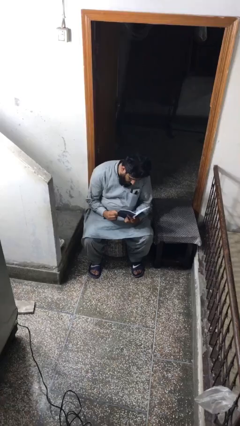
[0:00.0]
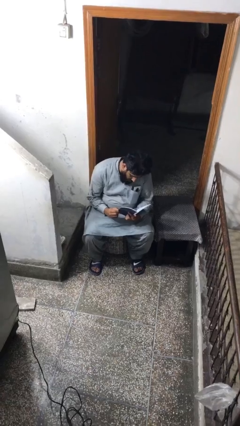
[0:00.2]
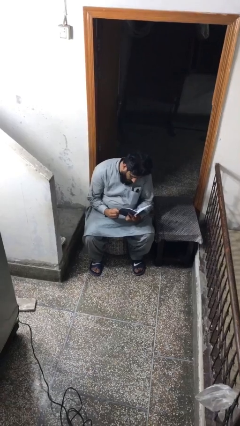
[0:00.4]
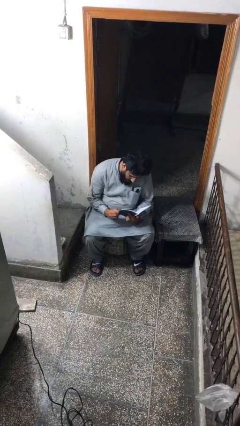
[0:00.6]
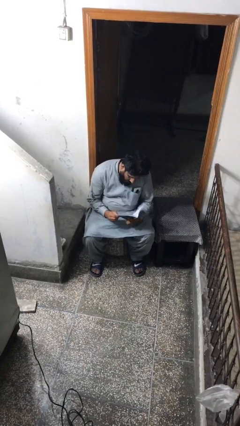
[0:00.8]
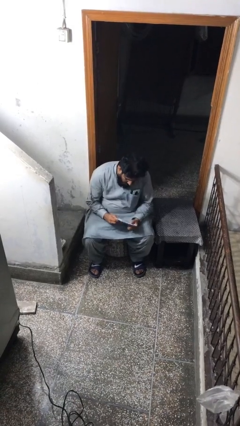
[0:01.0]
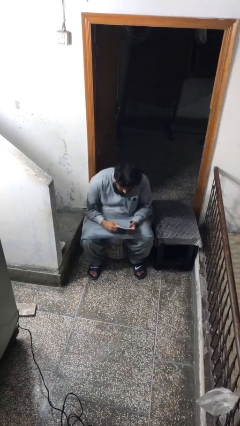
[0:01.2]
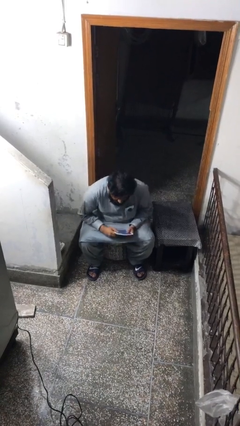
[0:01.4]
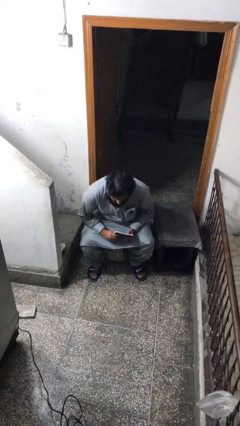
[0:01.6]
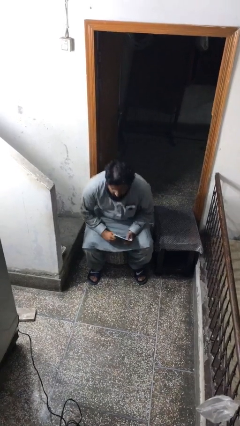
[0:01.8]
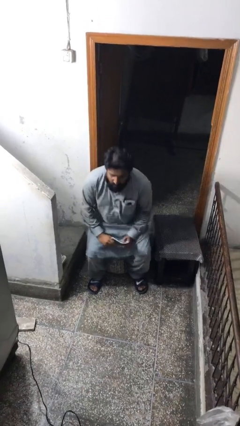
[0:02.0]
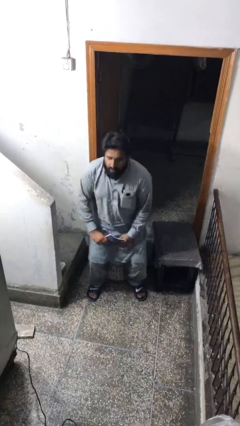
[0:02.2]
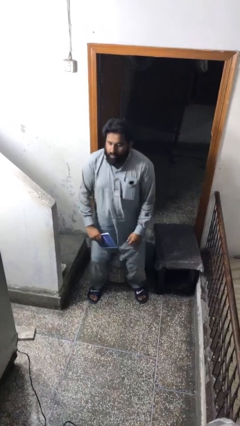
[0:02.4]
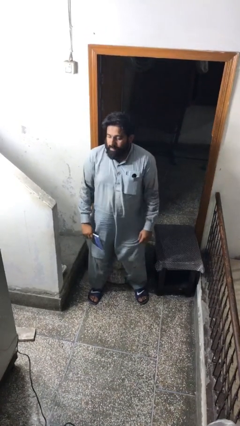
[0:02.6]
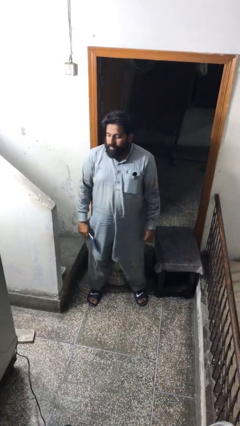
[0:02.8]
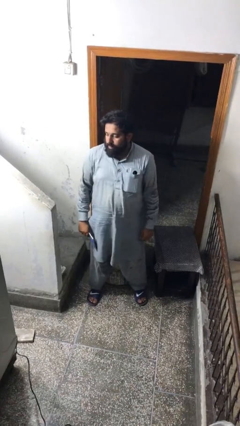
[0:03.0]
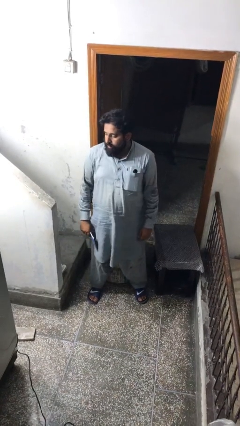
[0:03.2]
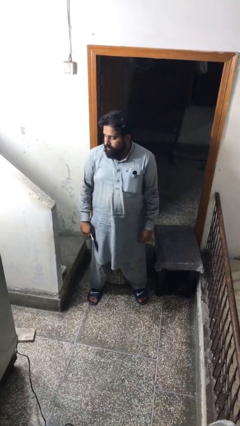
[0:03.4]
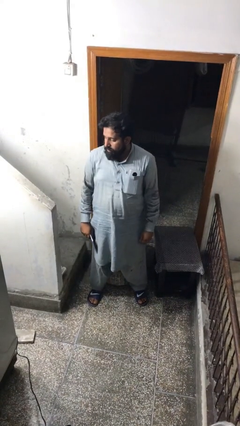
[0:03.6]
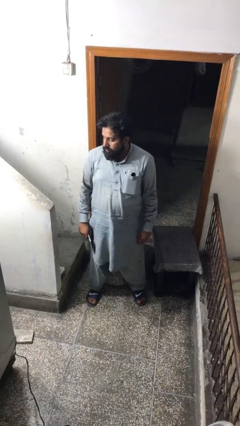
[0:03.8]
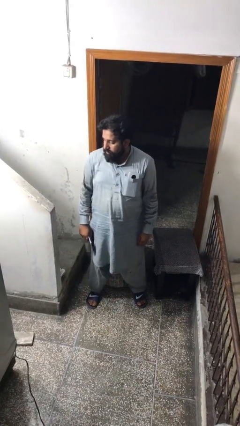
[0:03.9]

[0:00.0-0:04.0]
person stands up

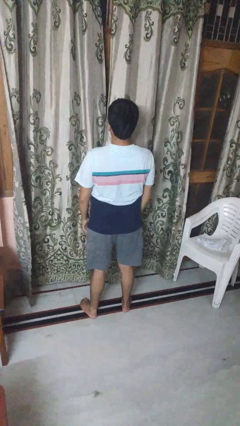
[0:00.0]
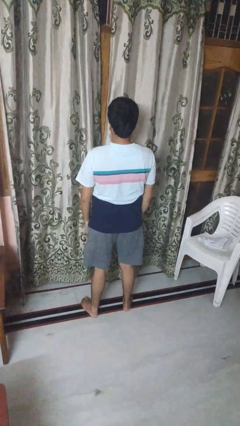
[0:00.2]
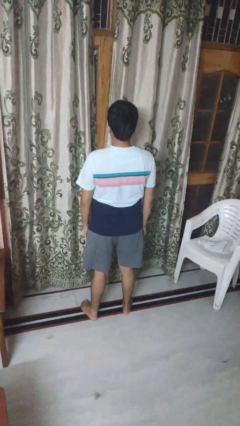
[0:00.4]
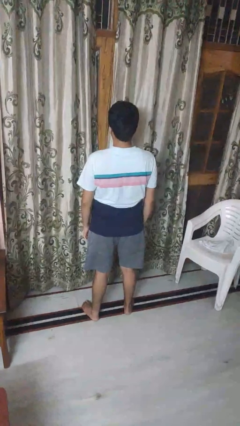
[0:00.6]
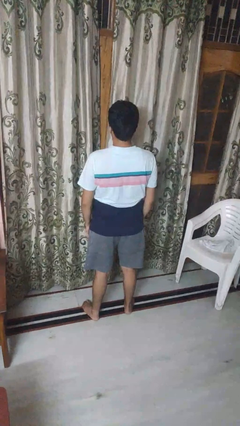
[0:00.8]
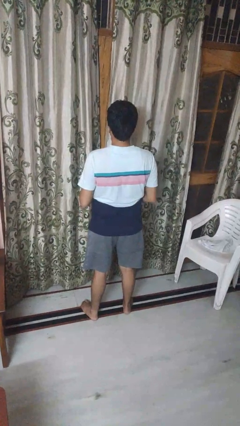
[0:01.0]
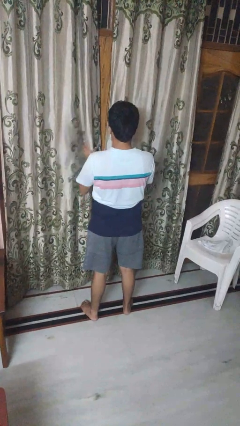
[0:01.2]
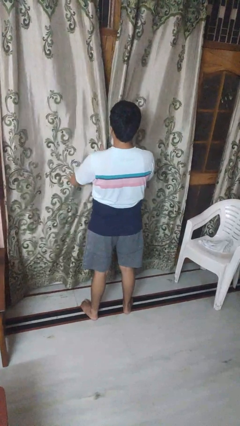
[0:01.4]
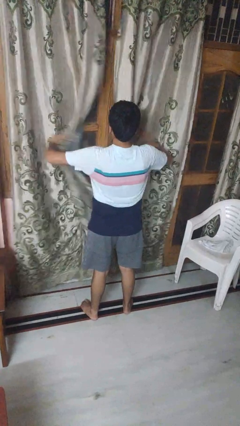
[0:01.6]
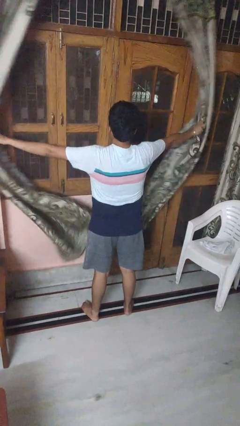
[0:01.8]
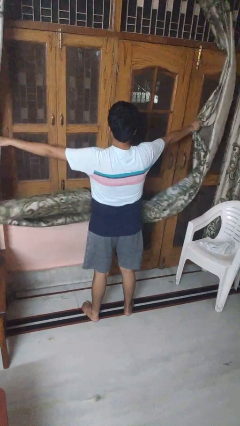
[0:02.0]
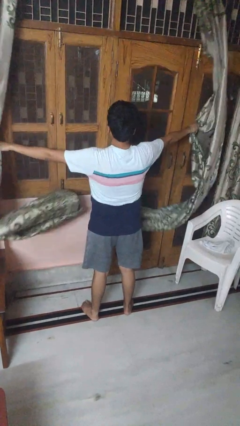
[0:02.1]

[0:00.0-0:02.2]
person opens curtains

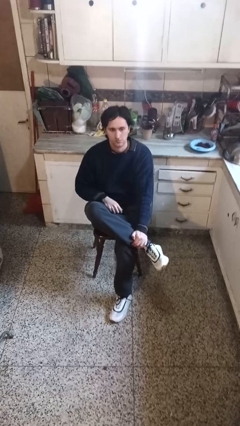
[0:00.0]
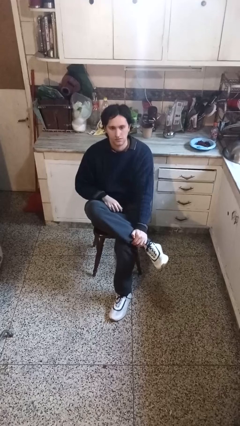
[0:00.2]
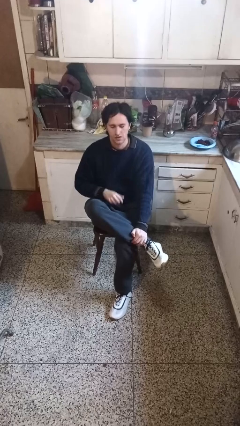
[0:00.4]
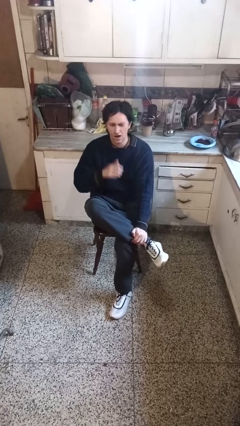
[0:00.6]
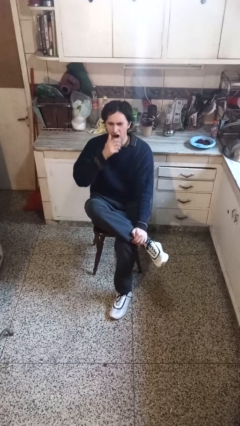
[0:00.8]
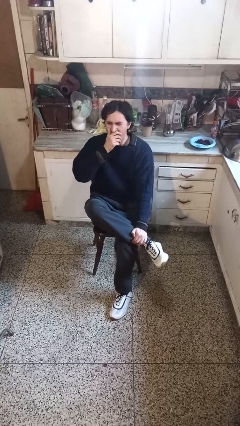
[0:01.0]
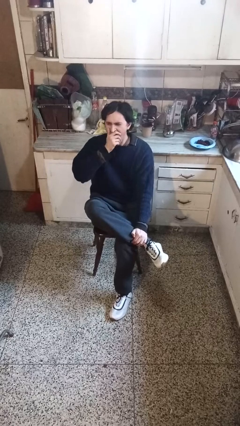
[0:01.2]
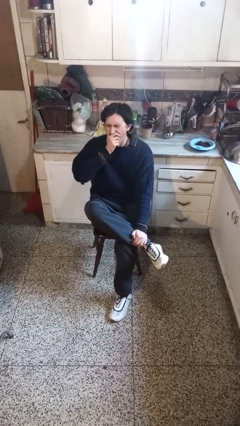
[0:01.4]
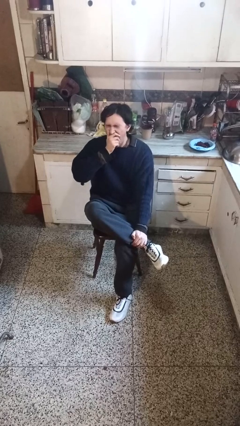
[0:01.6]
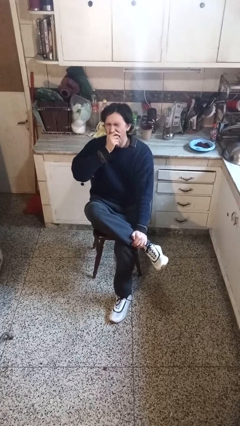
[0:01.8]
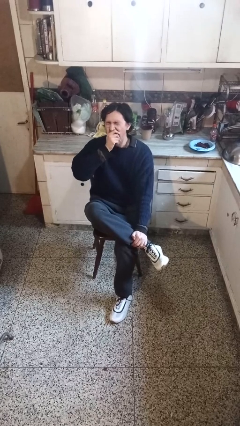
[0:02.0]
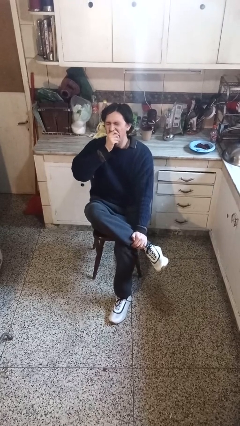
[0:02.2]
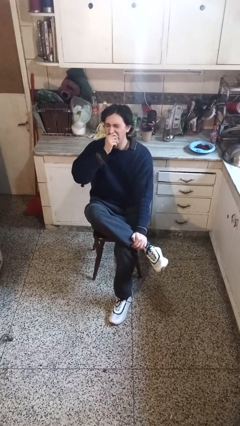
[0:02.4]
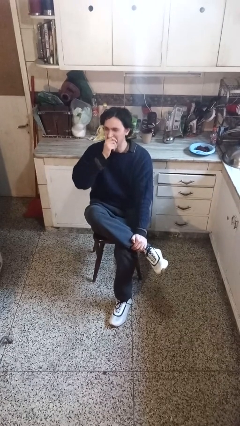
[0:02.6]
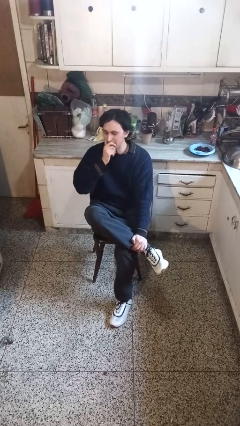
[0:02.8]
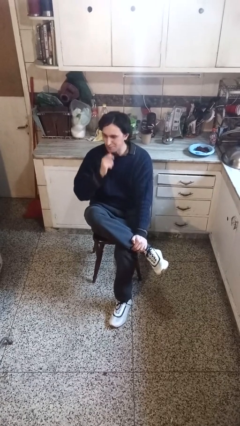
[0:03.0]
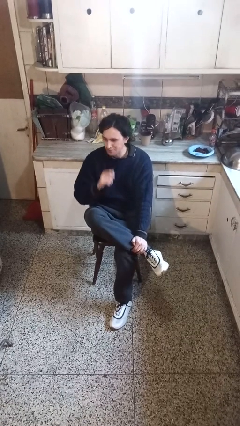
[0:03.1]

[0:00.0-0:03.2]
person yawns

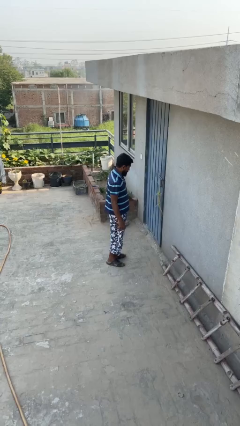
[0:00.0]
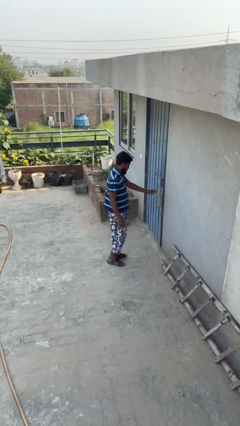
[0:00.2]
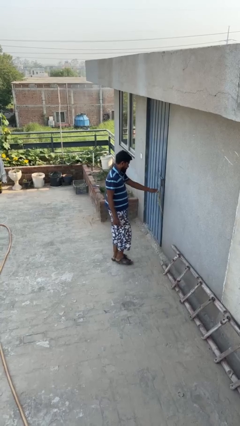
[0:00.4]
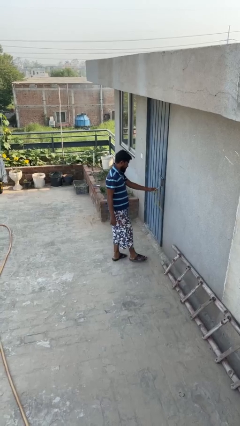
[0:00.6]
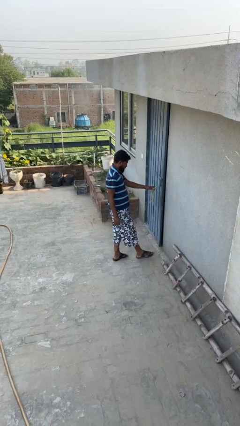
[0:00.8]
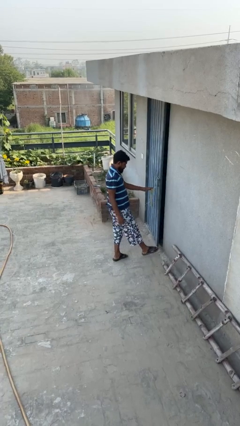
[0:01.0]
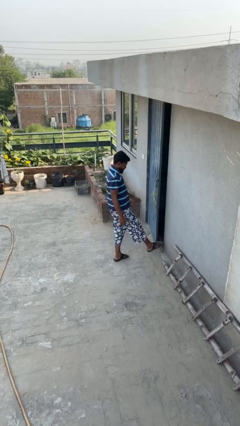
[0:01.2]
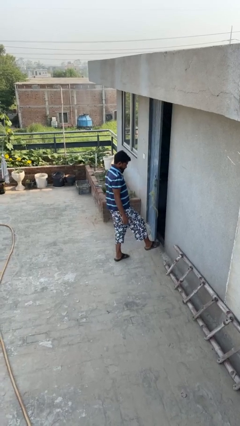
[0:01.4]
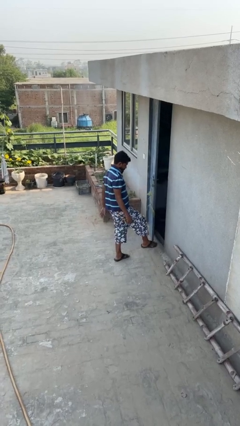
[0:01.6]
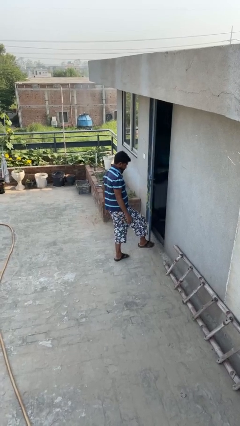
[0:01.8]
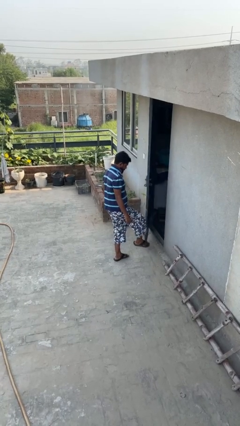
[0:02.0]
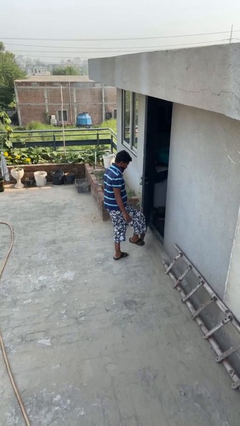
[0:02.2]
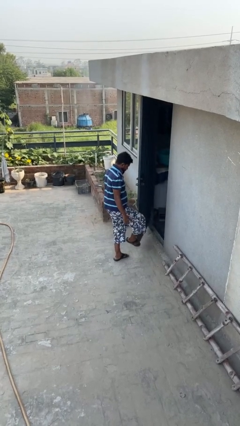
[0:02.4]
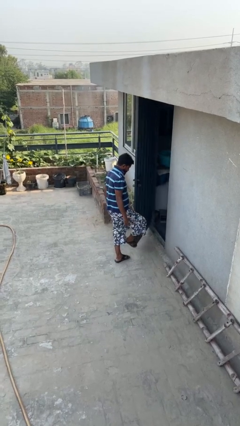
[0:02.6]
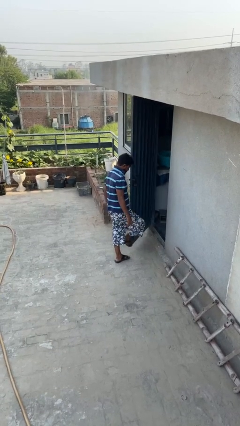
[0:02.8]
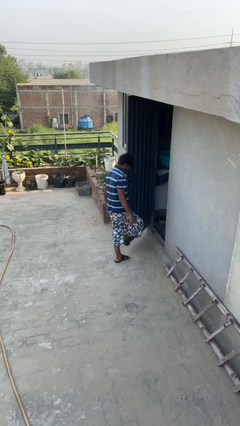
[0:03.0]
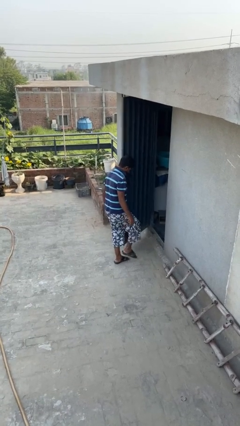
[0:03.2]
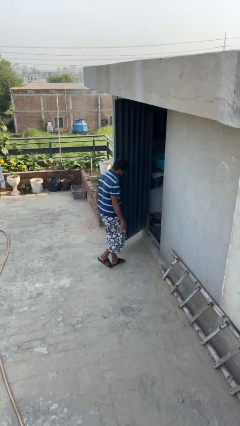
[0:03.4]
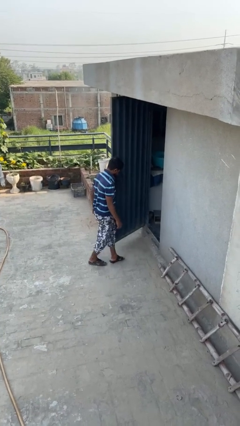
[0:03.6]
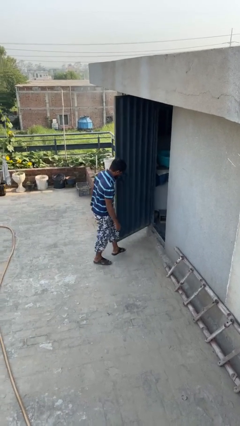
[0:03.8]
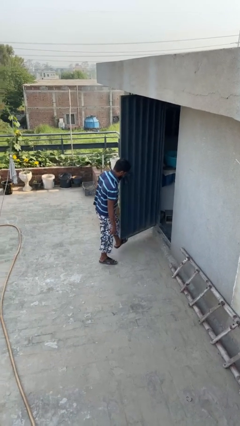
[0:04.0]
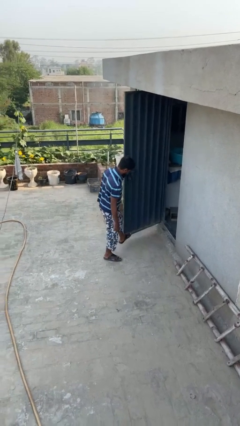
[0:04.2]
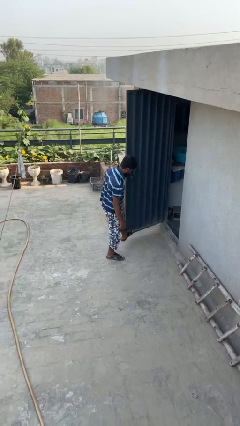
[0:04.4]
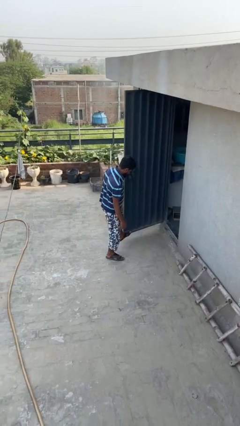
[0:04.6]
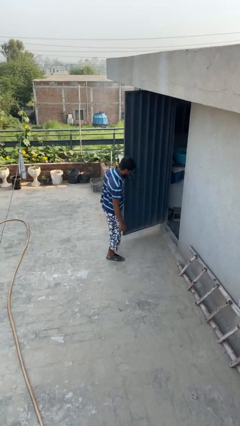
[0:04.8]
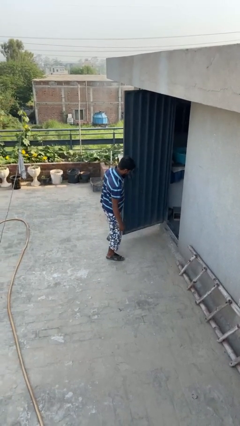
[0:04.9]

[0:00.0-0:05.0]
person opens facility door

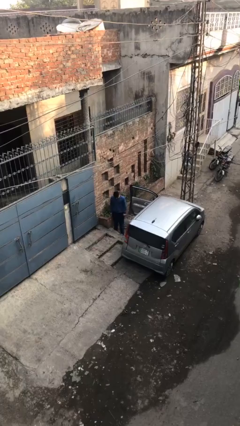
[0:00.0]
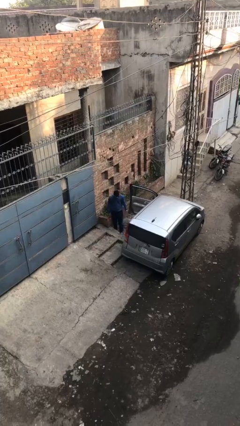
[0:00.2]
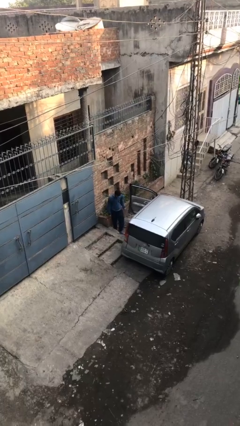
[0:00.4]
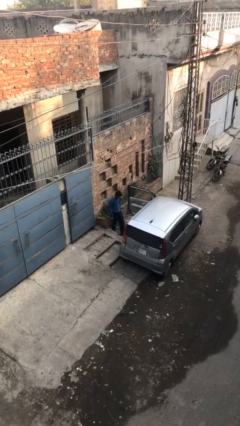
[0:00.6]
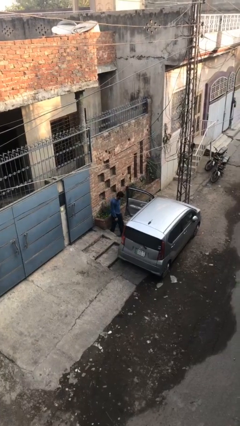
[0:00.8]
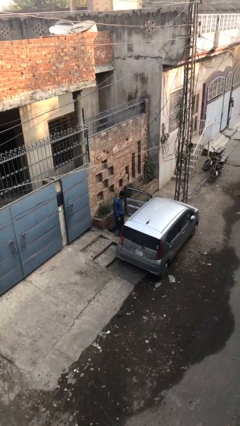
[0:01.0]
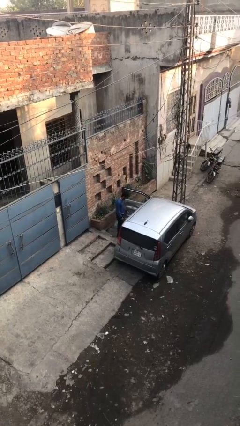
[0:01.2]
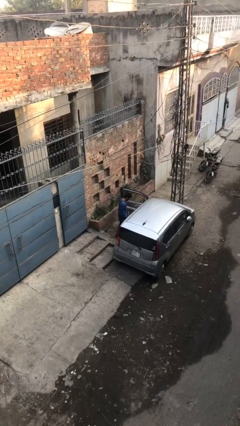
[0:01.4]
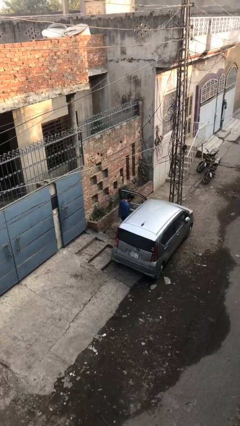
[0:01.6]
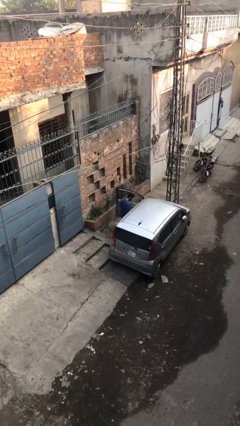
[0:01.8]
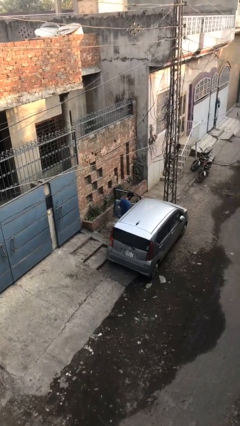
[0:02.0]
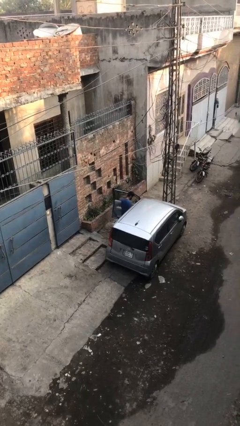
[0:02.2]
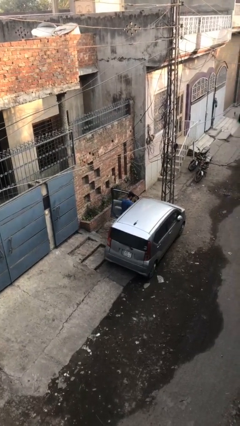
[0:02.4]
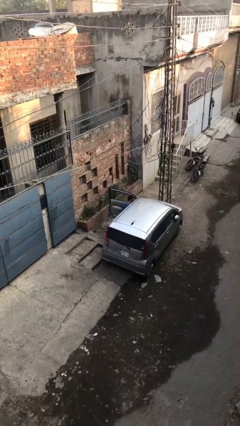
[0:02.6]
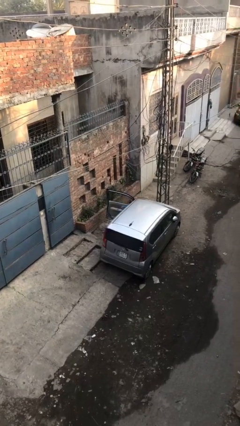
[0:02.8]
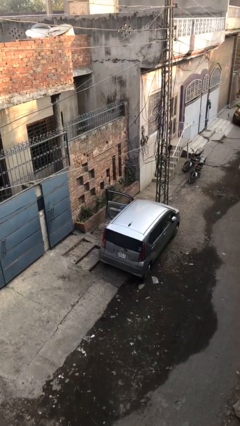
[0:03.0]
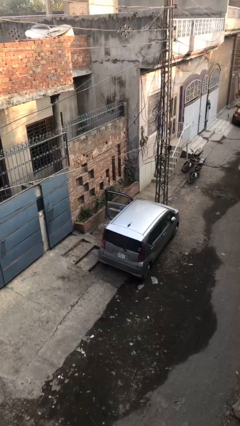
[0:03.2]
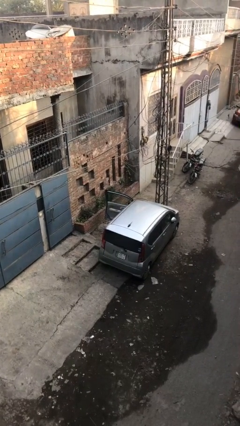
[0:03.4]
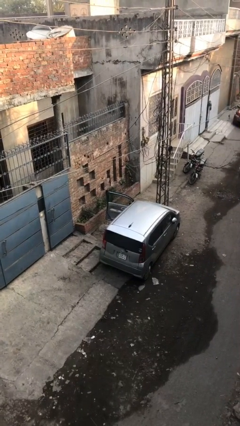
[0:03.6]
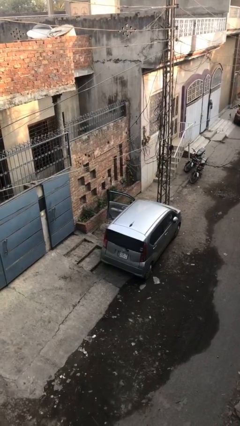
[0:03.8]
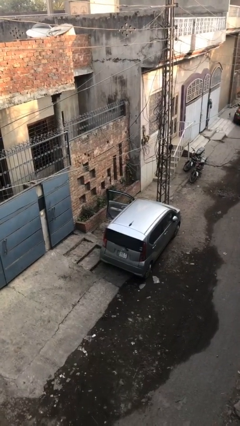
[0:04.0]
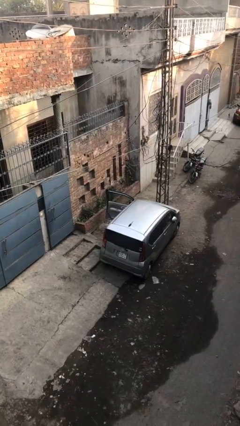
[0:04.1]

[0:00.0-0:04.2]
person enters car
